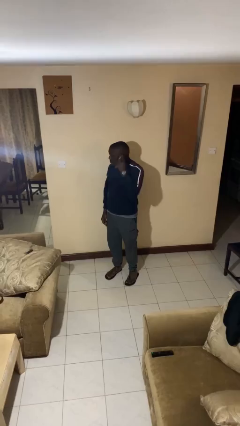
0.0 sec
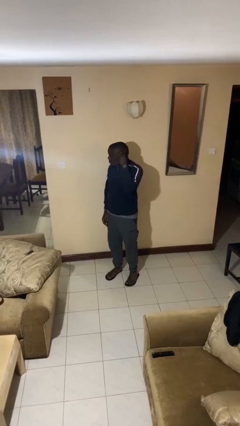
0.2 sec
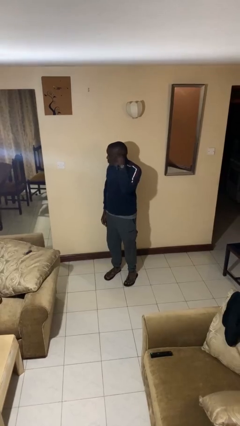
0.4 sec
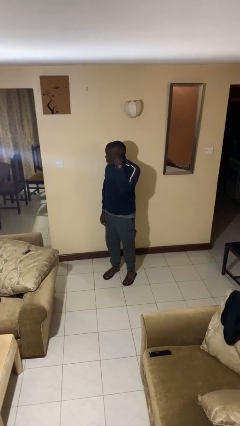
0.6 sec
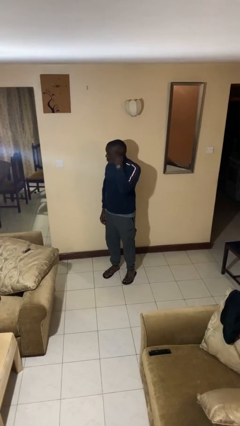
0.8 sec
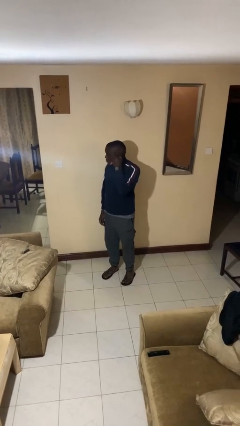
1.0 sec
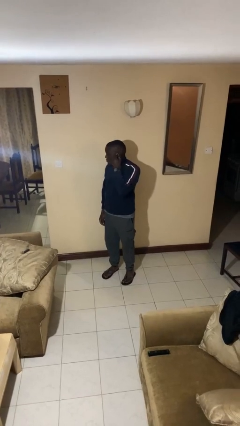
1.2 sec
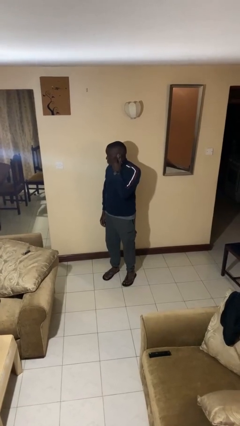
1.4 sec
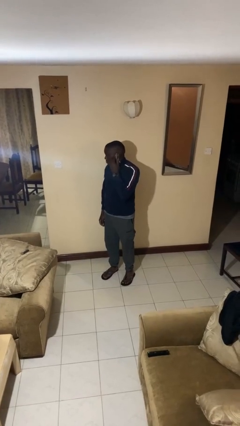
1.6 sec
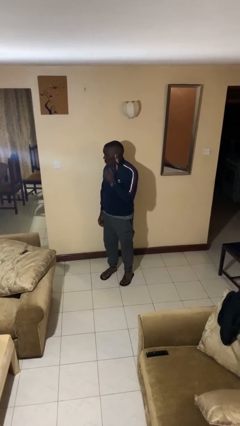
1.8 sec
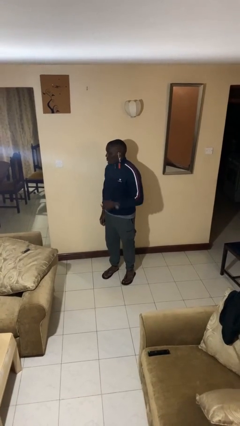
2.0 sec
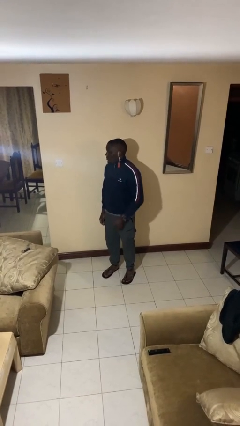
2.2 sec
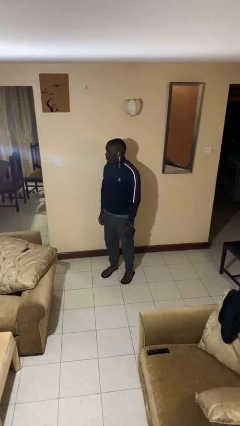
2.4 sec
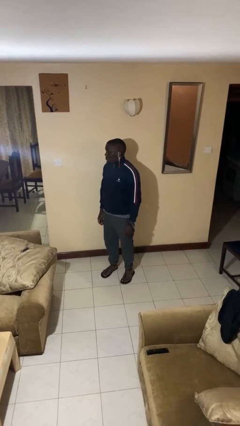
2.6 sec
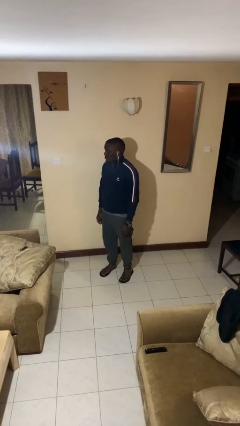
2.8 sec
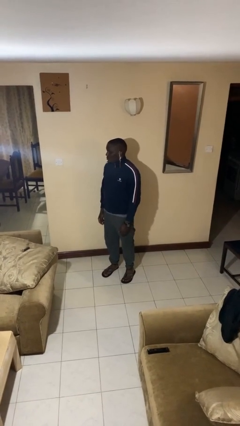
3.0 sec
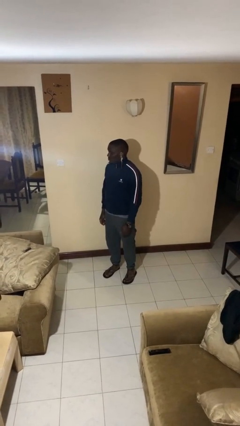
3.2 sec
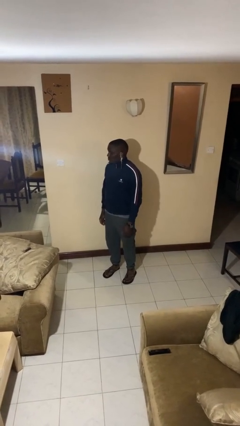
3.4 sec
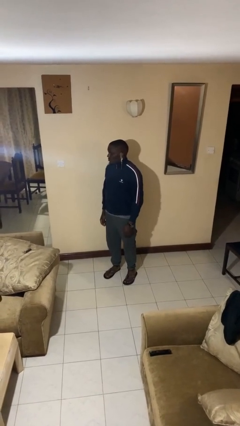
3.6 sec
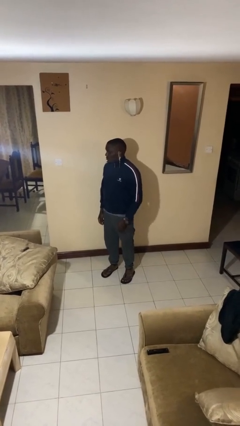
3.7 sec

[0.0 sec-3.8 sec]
person puts on earrings

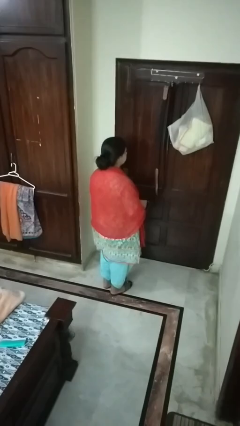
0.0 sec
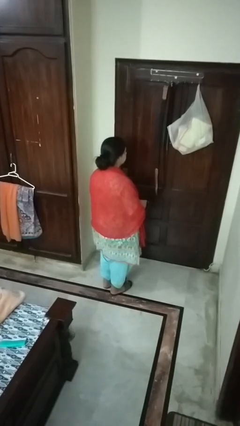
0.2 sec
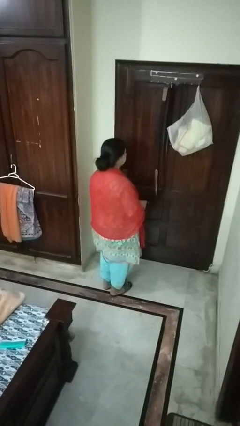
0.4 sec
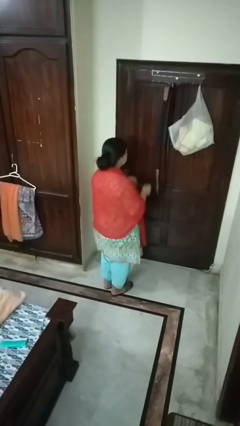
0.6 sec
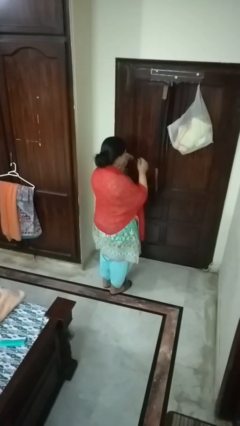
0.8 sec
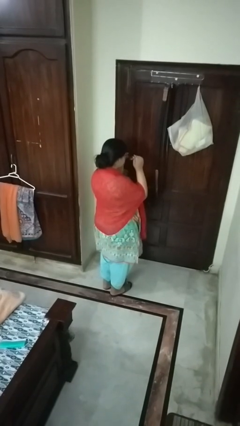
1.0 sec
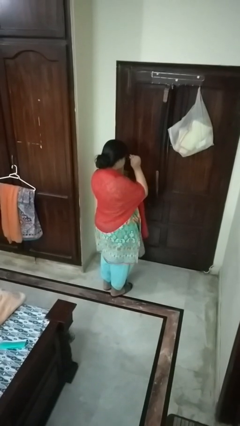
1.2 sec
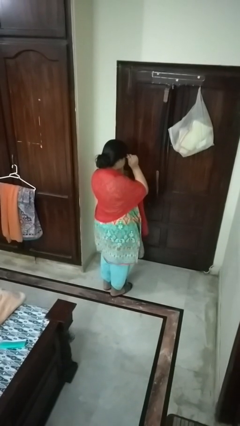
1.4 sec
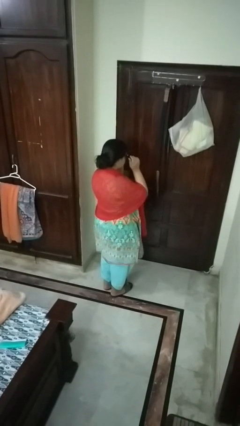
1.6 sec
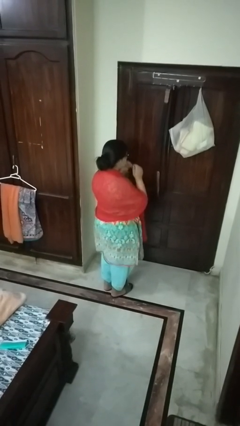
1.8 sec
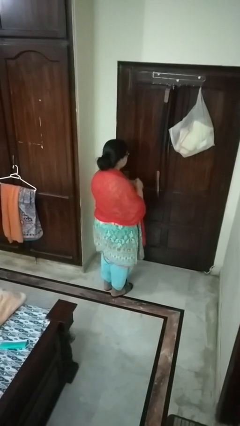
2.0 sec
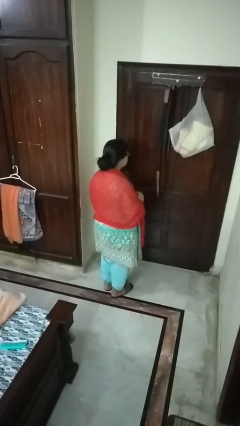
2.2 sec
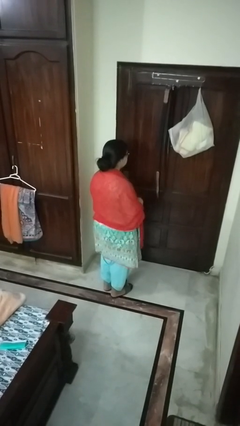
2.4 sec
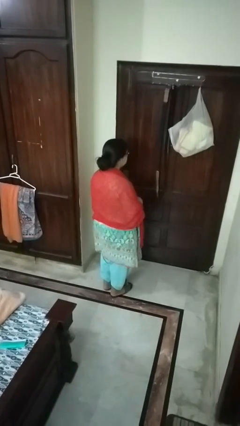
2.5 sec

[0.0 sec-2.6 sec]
person puts on glasses

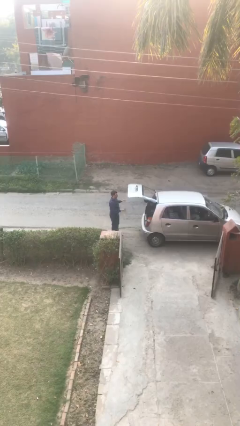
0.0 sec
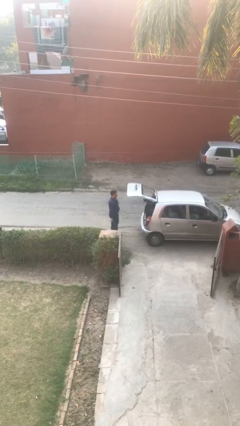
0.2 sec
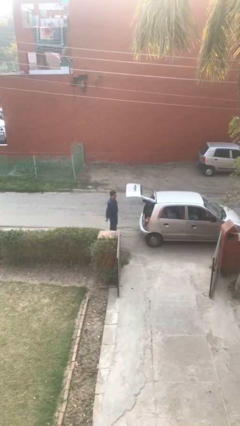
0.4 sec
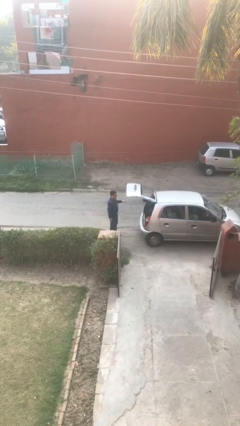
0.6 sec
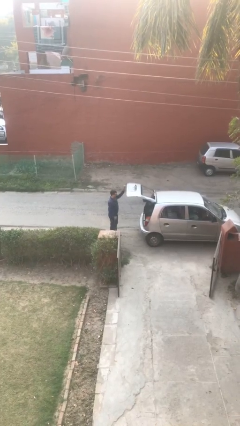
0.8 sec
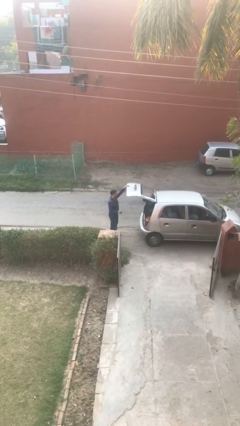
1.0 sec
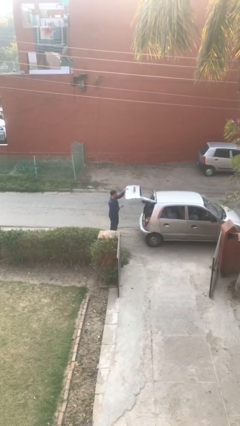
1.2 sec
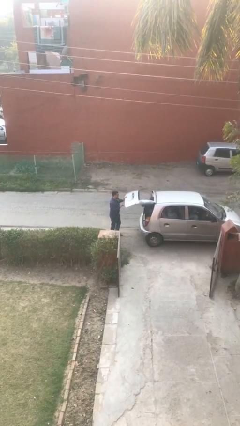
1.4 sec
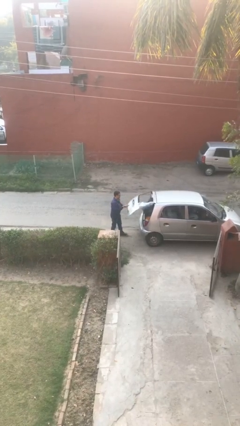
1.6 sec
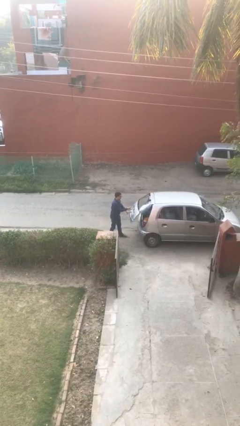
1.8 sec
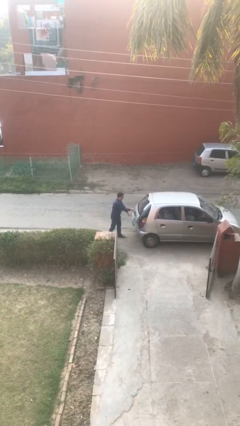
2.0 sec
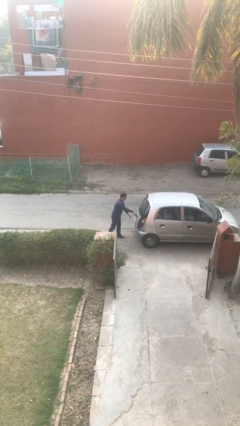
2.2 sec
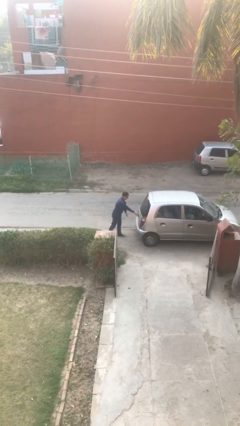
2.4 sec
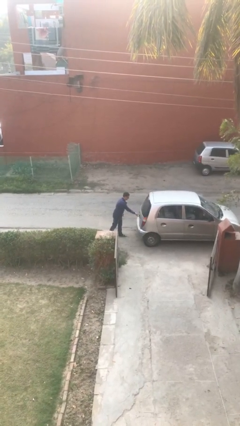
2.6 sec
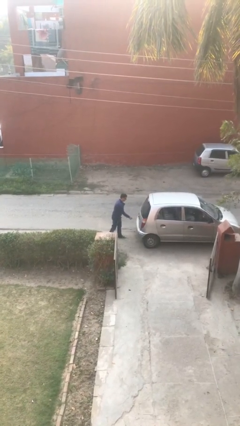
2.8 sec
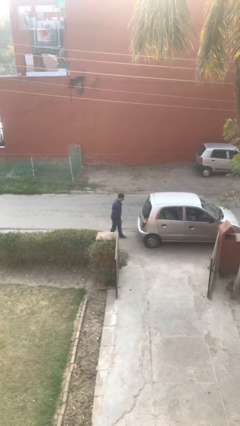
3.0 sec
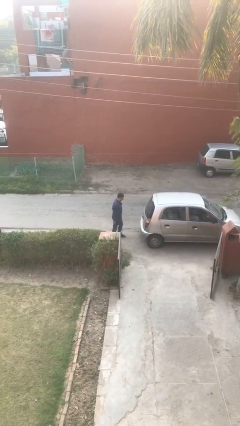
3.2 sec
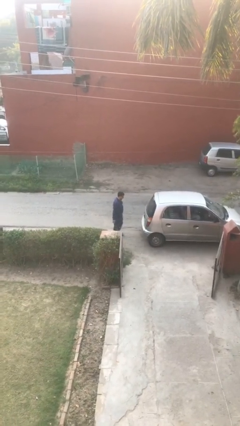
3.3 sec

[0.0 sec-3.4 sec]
person closes car trunk

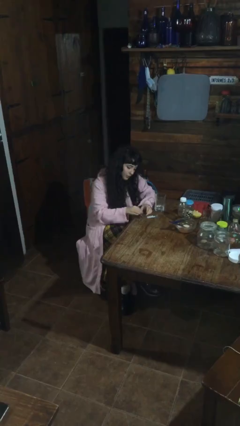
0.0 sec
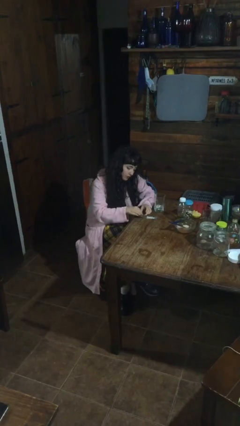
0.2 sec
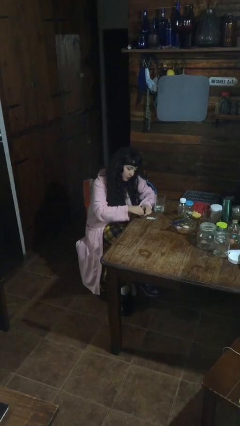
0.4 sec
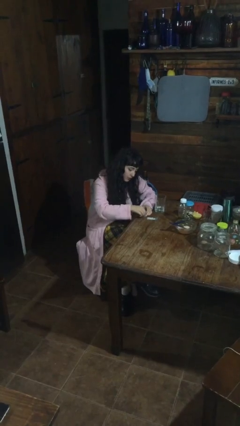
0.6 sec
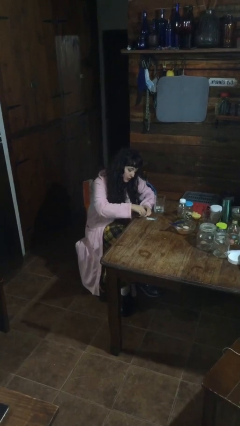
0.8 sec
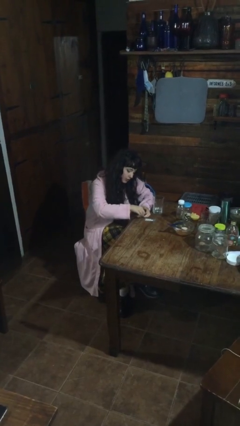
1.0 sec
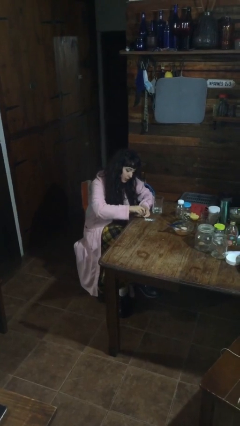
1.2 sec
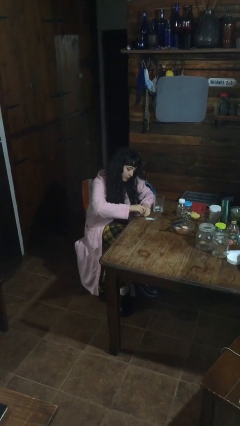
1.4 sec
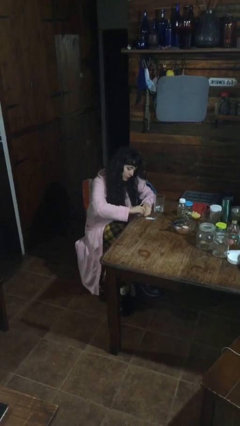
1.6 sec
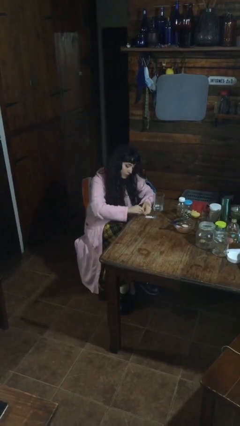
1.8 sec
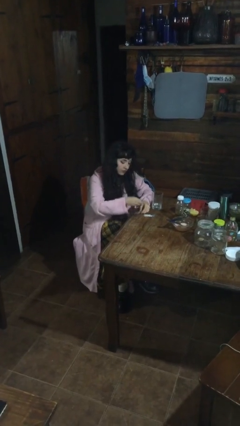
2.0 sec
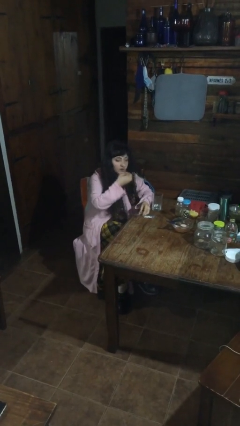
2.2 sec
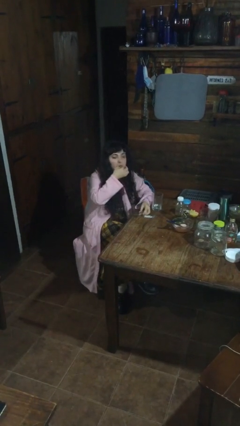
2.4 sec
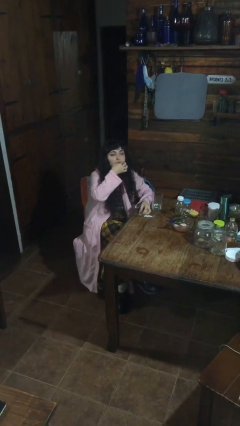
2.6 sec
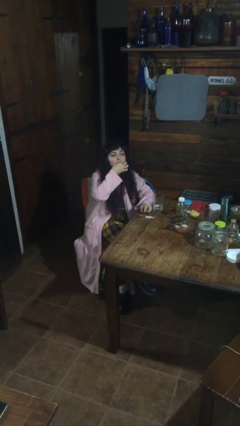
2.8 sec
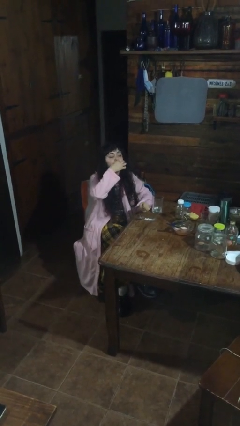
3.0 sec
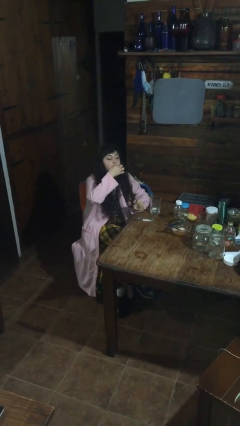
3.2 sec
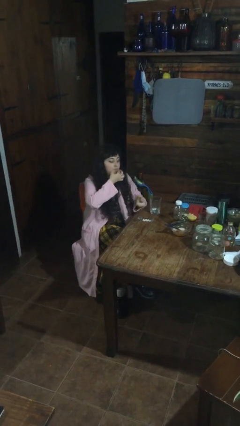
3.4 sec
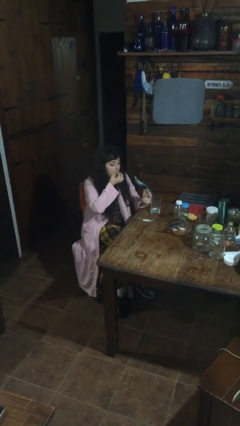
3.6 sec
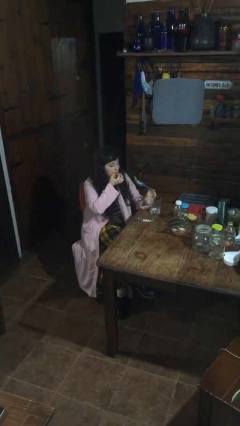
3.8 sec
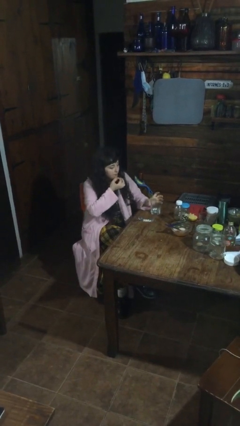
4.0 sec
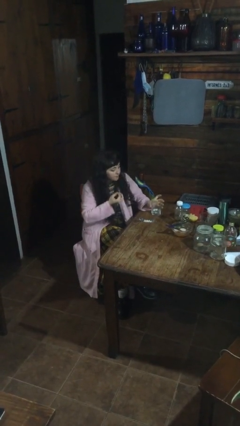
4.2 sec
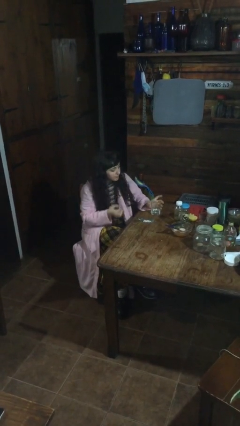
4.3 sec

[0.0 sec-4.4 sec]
person takes medicine pills

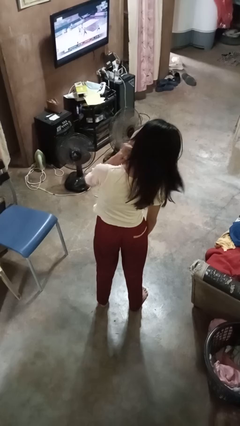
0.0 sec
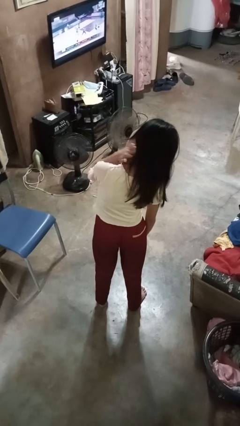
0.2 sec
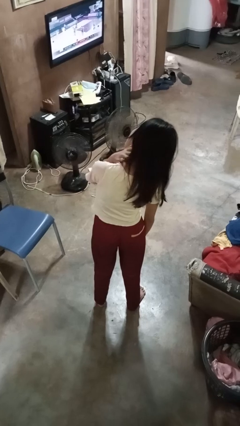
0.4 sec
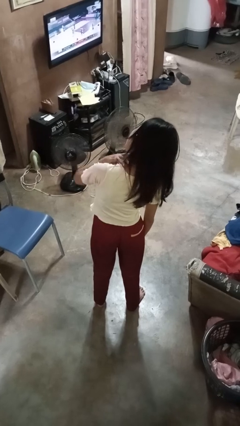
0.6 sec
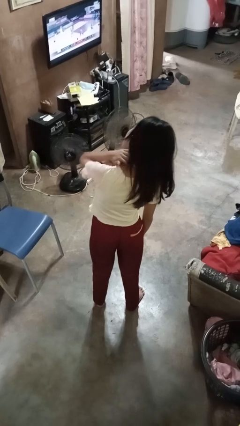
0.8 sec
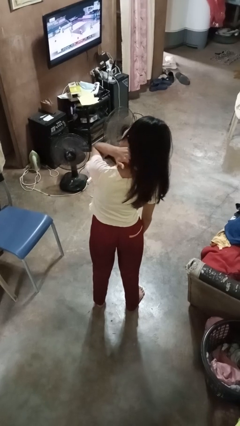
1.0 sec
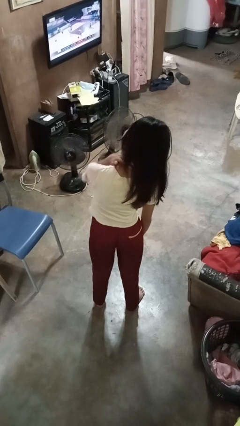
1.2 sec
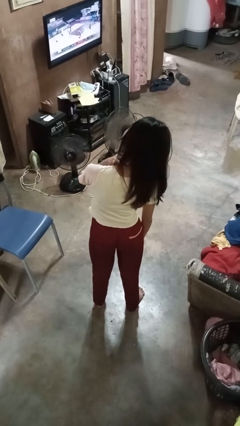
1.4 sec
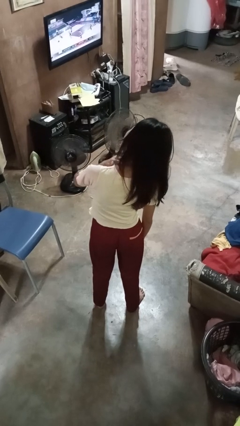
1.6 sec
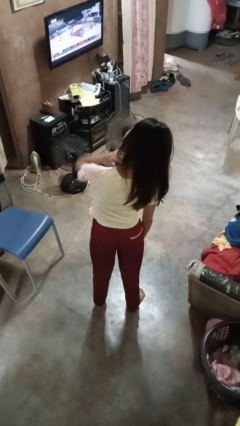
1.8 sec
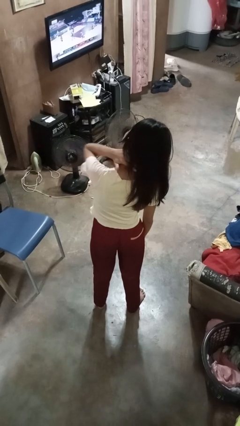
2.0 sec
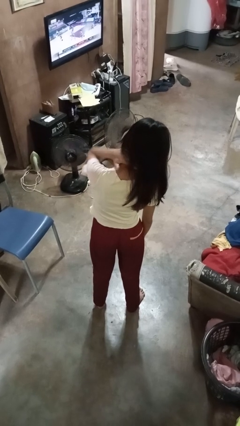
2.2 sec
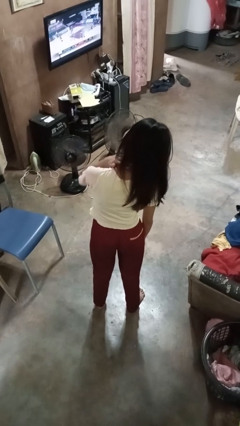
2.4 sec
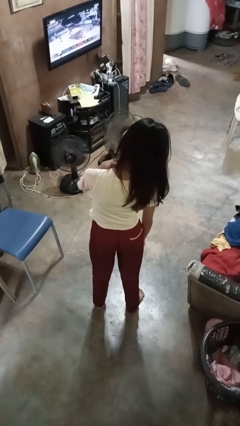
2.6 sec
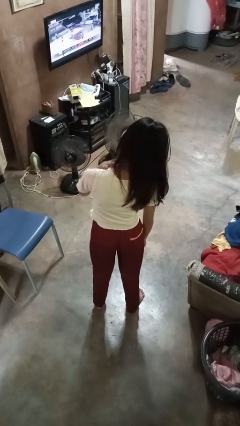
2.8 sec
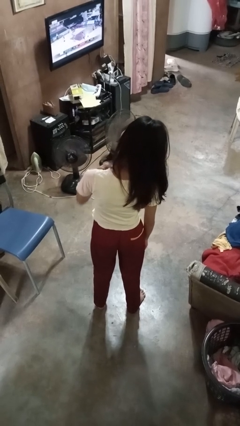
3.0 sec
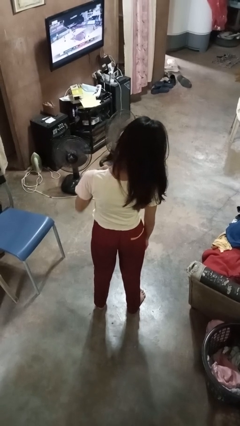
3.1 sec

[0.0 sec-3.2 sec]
person rubs neck
